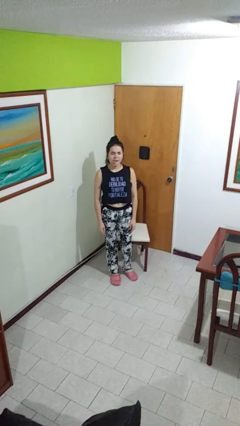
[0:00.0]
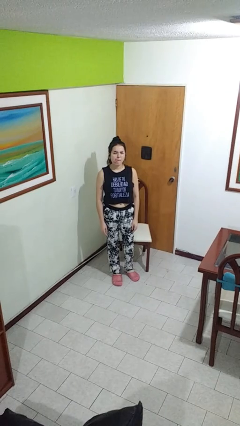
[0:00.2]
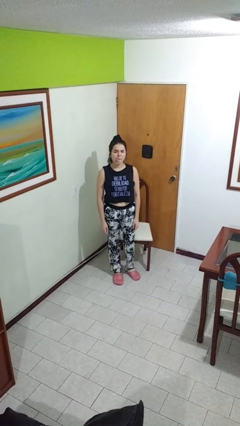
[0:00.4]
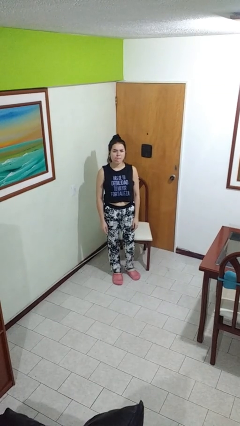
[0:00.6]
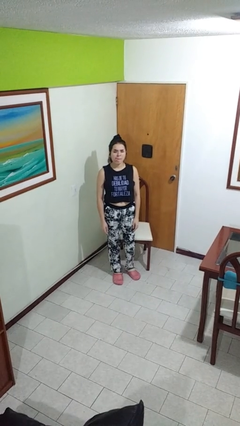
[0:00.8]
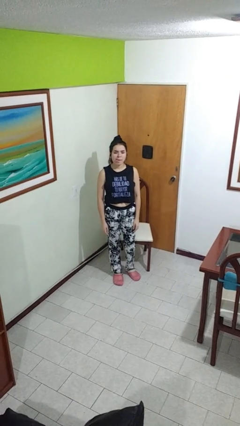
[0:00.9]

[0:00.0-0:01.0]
person sticks out tongue

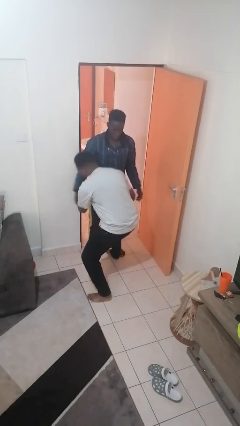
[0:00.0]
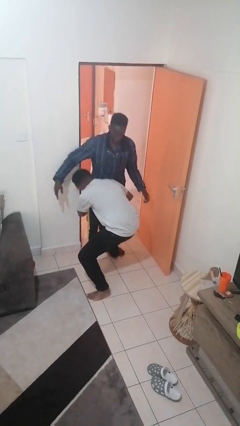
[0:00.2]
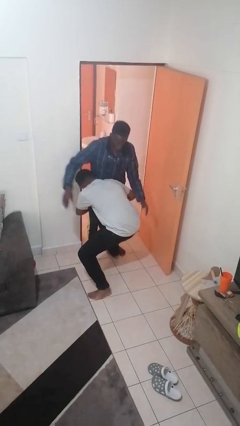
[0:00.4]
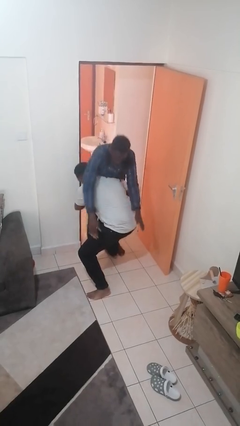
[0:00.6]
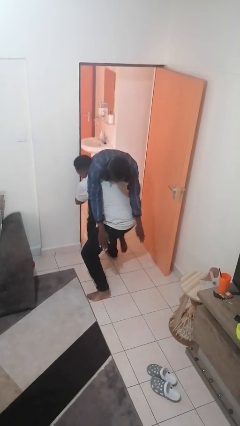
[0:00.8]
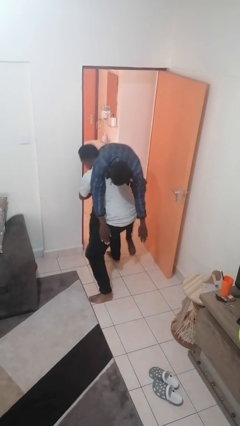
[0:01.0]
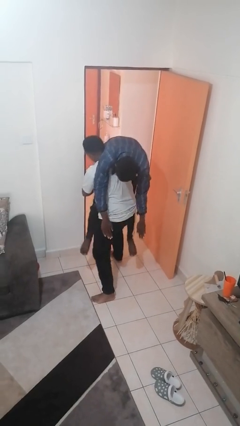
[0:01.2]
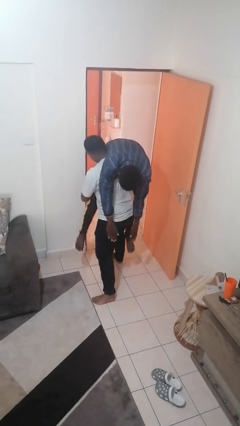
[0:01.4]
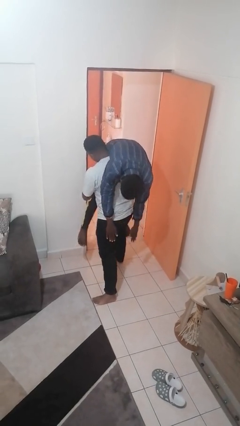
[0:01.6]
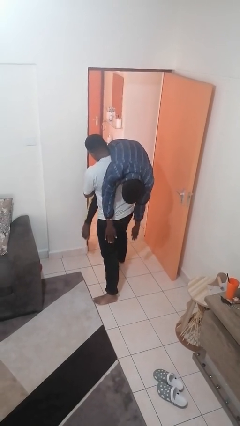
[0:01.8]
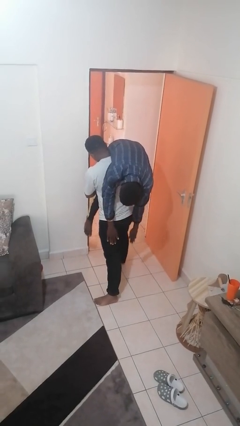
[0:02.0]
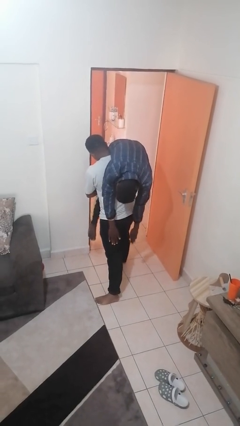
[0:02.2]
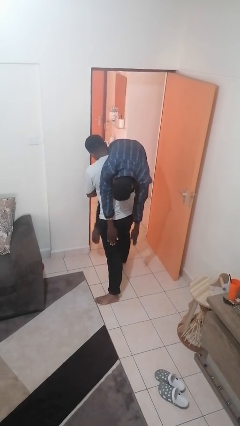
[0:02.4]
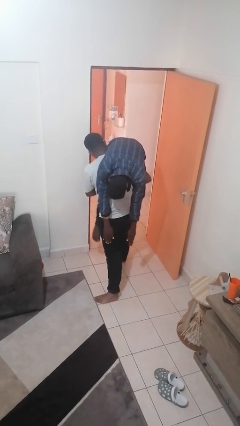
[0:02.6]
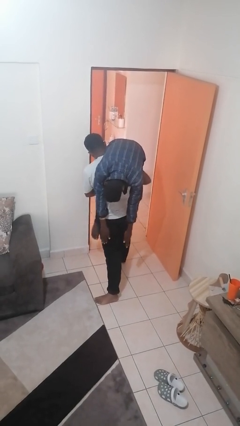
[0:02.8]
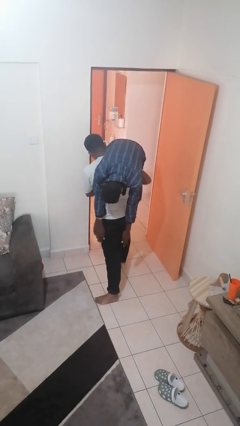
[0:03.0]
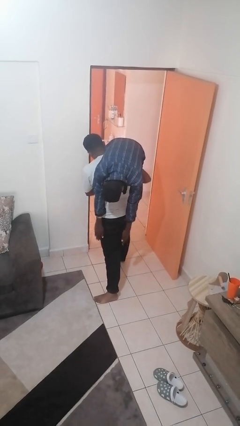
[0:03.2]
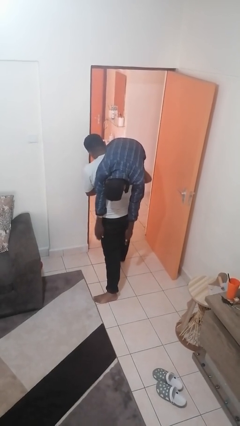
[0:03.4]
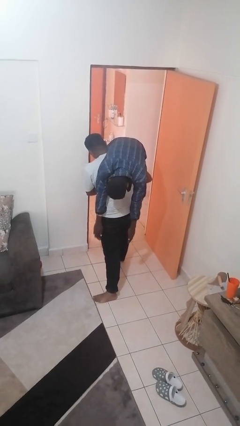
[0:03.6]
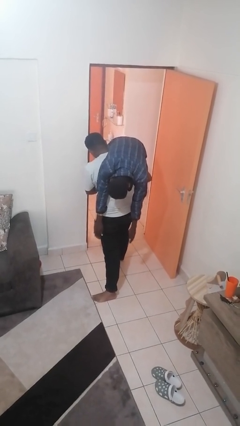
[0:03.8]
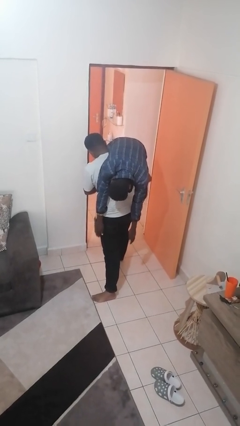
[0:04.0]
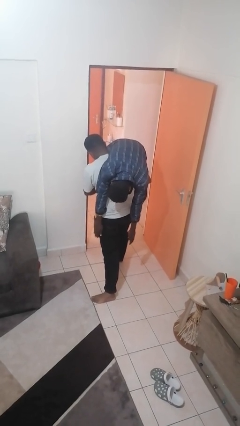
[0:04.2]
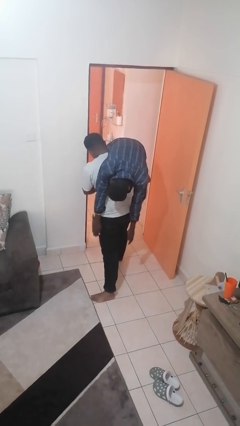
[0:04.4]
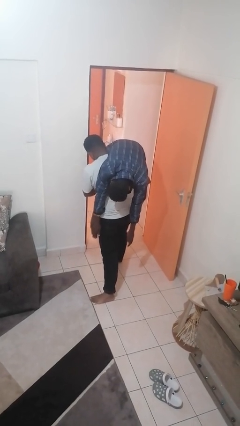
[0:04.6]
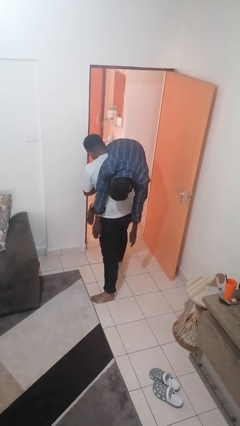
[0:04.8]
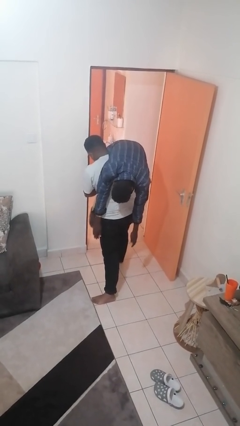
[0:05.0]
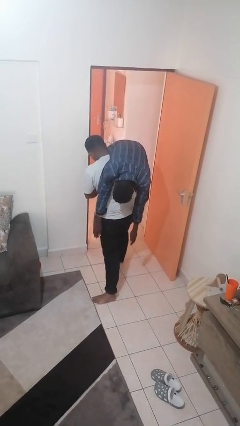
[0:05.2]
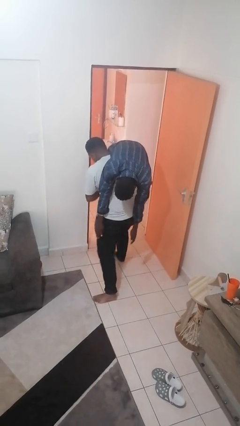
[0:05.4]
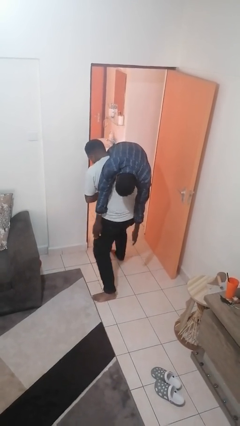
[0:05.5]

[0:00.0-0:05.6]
person carries person over shoulder

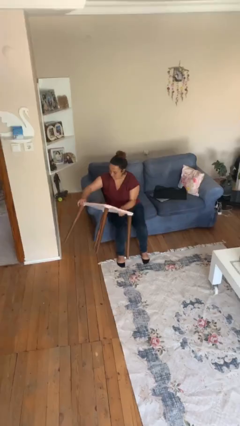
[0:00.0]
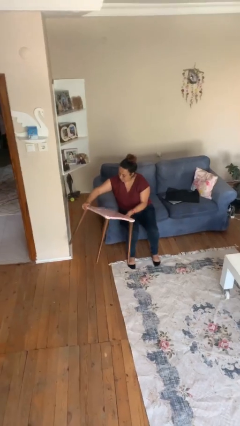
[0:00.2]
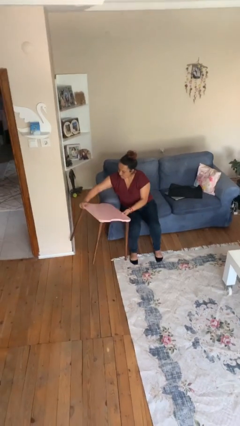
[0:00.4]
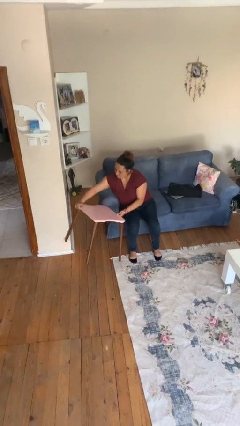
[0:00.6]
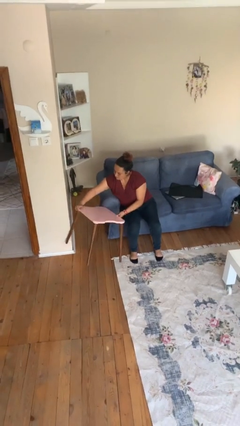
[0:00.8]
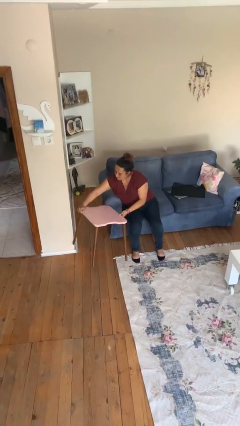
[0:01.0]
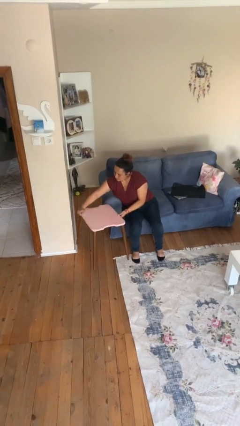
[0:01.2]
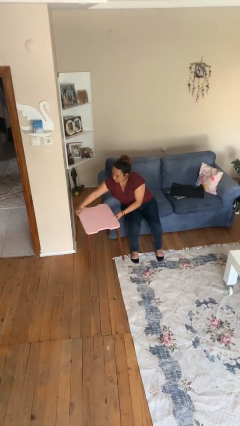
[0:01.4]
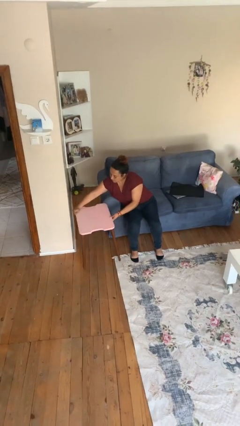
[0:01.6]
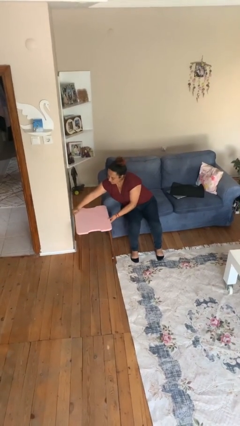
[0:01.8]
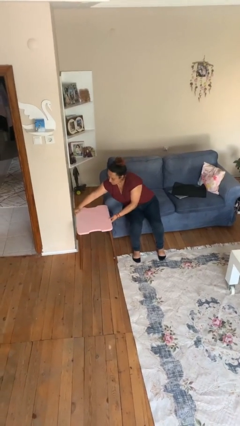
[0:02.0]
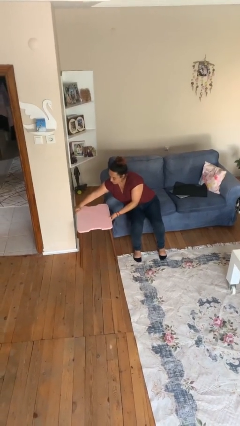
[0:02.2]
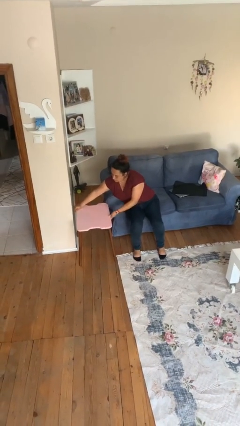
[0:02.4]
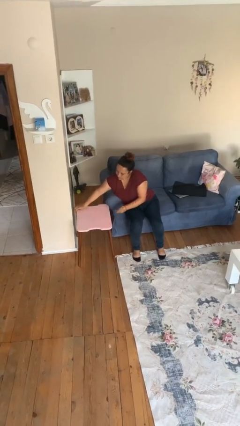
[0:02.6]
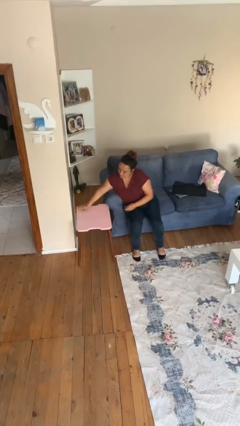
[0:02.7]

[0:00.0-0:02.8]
person puts down object on floor

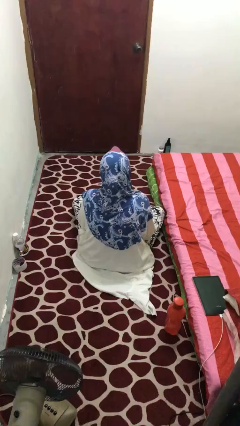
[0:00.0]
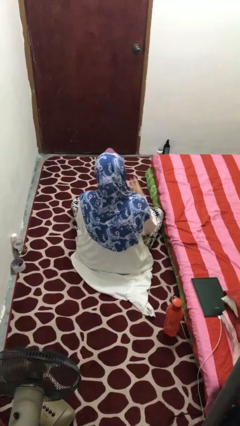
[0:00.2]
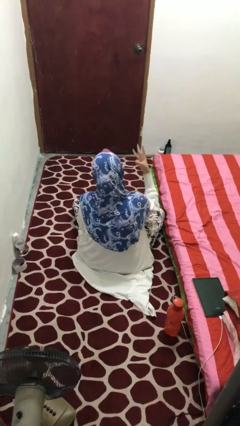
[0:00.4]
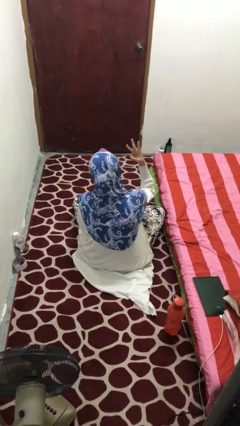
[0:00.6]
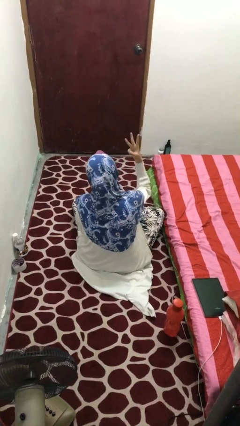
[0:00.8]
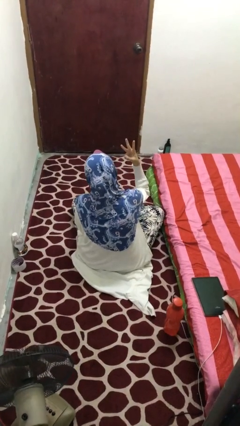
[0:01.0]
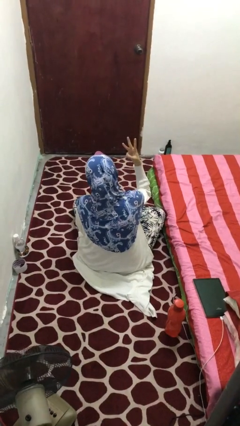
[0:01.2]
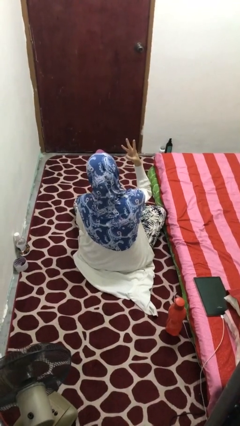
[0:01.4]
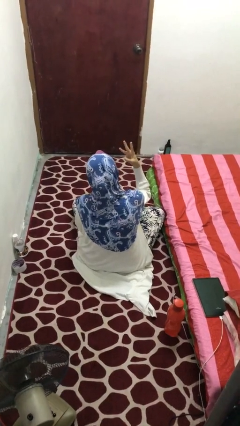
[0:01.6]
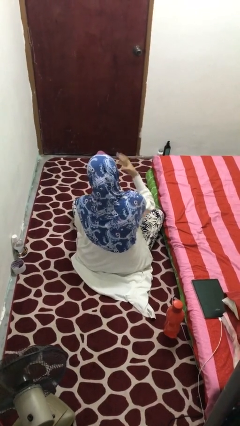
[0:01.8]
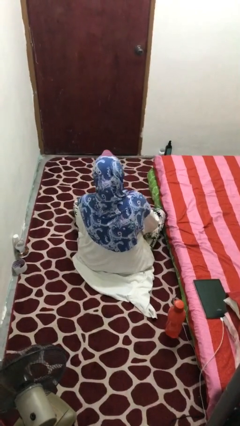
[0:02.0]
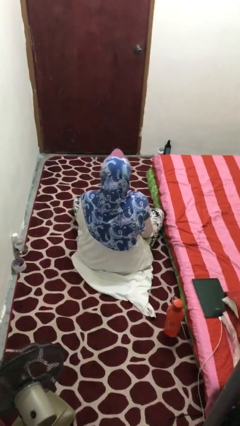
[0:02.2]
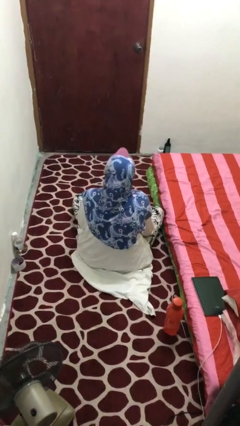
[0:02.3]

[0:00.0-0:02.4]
person gestures number three

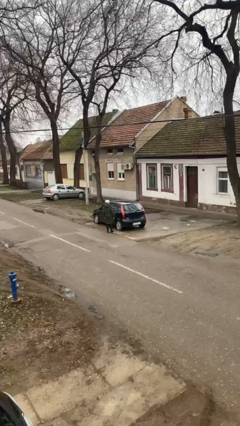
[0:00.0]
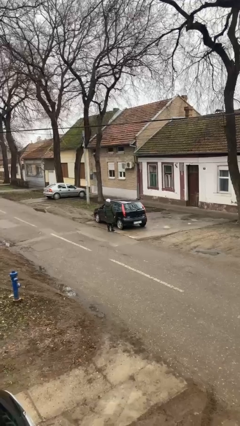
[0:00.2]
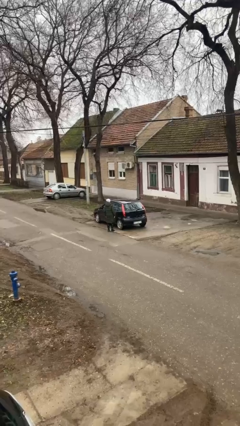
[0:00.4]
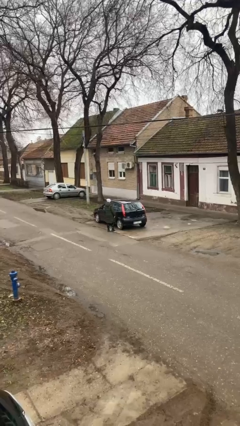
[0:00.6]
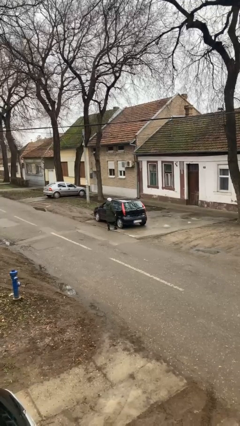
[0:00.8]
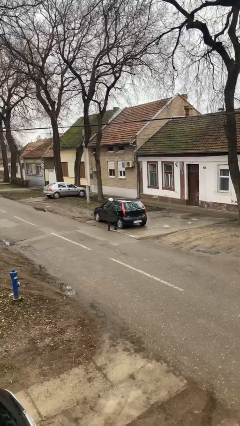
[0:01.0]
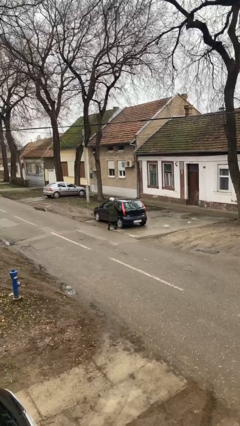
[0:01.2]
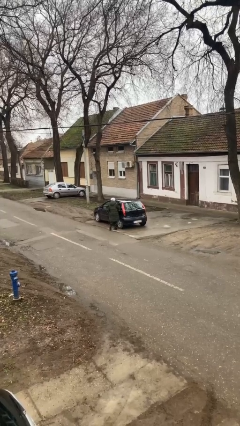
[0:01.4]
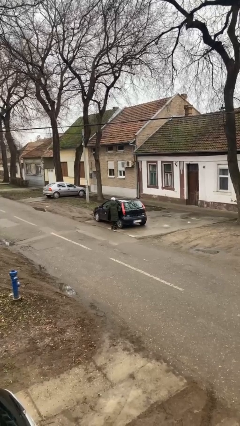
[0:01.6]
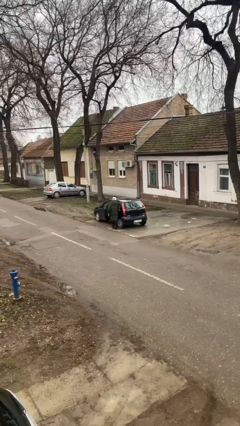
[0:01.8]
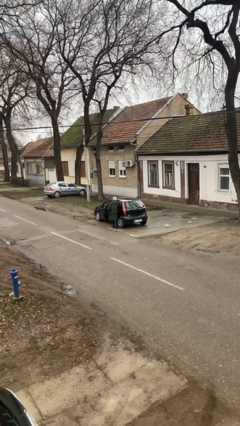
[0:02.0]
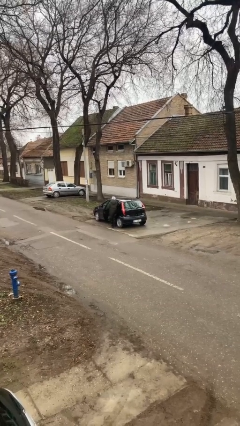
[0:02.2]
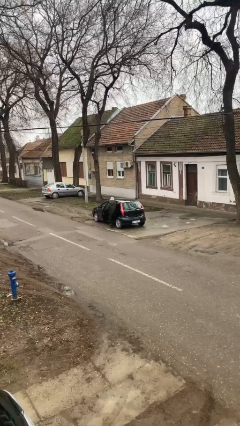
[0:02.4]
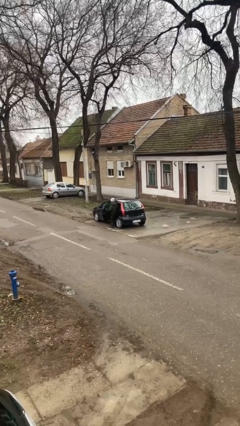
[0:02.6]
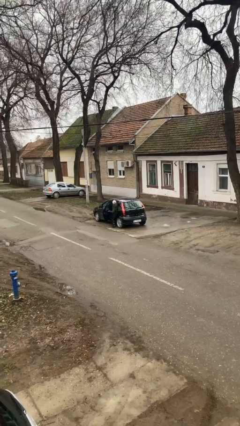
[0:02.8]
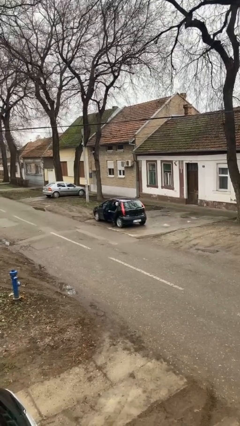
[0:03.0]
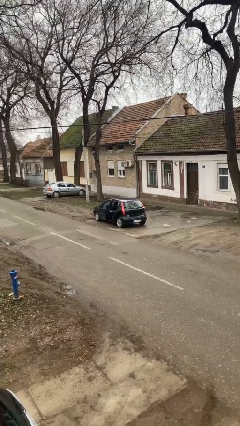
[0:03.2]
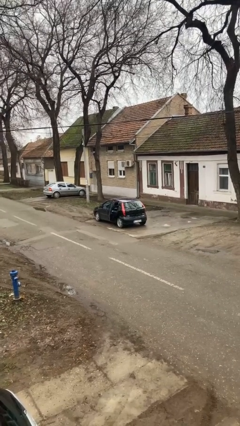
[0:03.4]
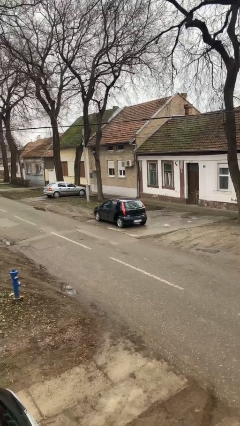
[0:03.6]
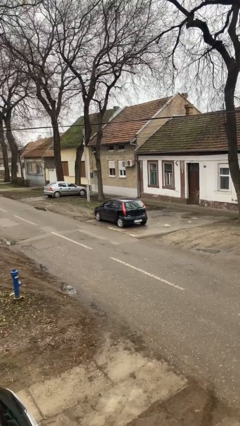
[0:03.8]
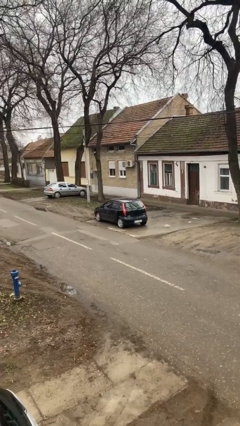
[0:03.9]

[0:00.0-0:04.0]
car picks up person

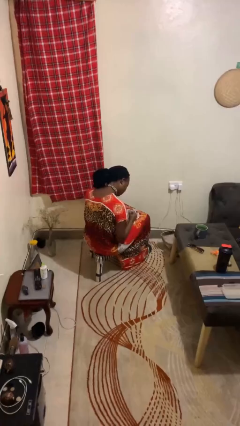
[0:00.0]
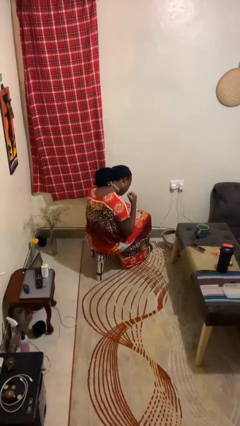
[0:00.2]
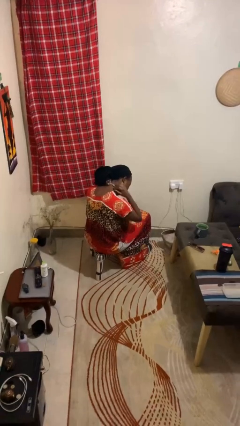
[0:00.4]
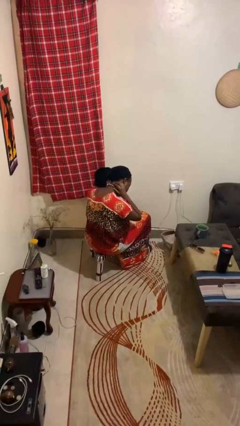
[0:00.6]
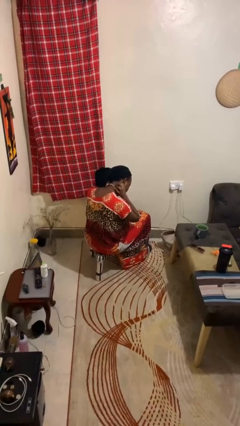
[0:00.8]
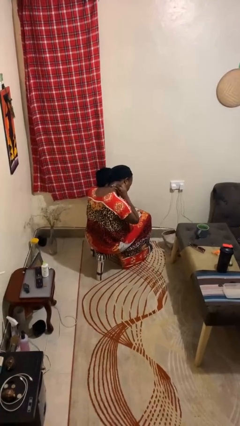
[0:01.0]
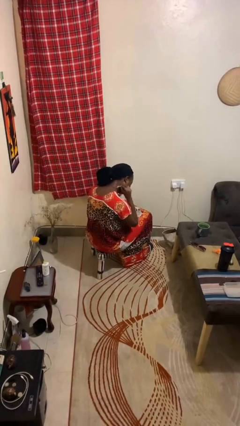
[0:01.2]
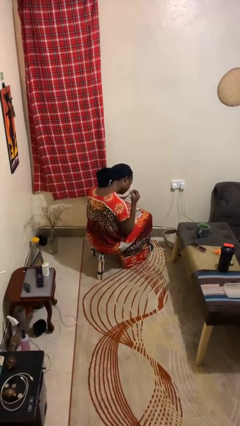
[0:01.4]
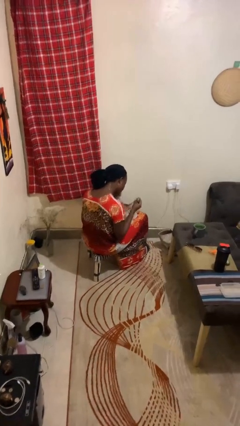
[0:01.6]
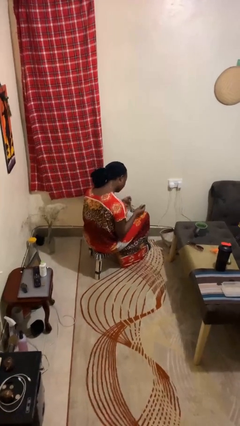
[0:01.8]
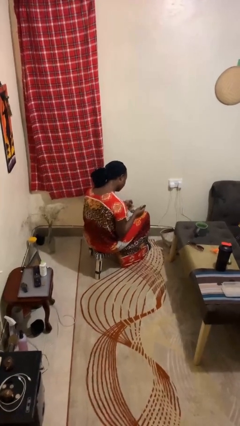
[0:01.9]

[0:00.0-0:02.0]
person takes off necklace
